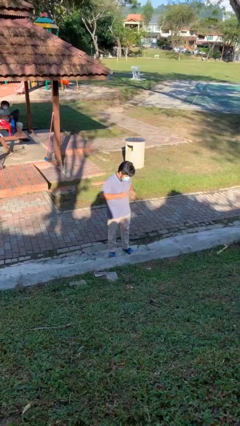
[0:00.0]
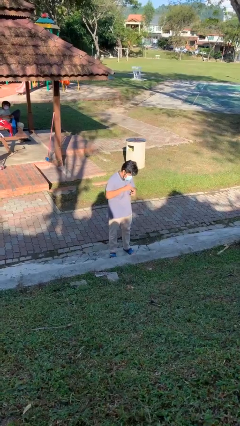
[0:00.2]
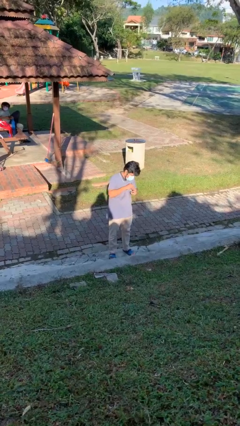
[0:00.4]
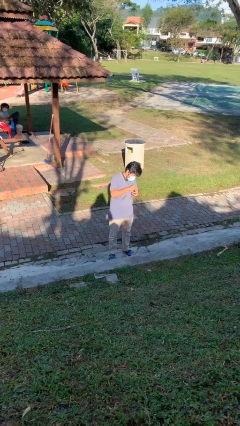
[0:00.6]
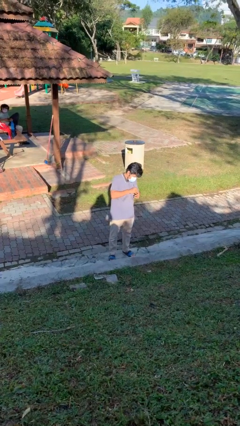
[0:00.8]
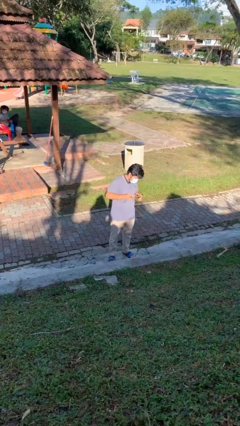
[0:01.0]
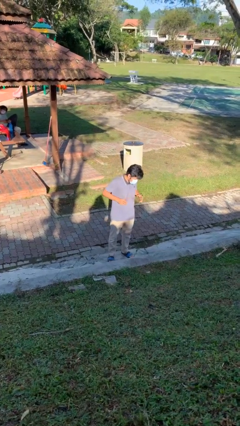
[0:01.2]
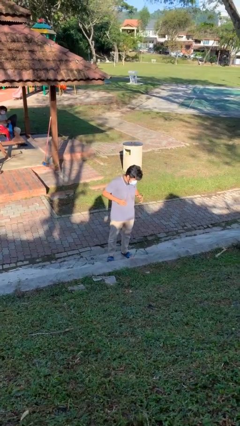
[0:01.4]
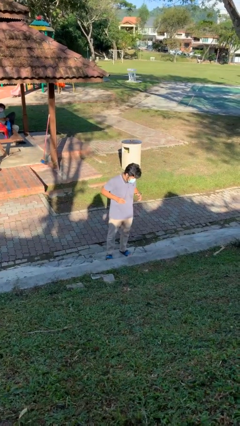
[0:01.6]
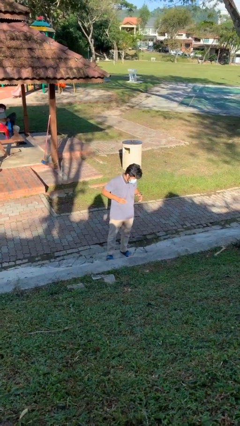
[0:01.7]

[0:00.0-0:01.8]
person puts on ring

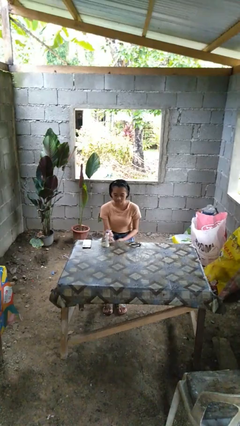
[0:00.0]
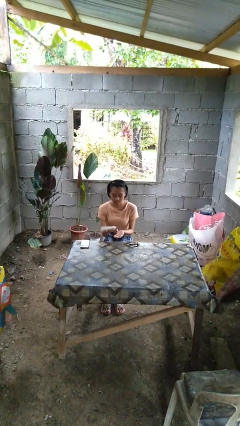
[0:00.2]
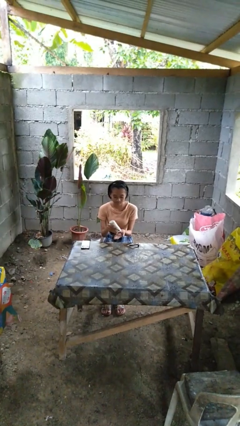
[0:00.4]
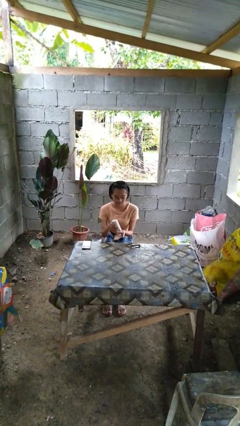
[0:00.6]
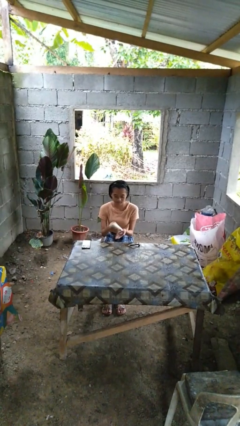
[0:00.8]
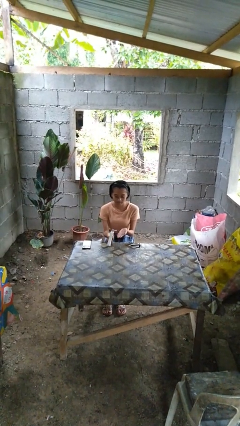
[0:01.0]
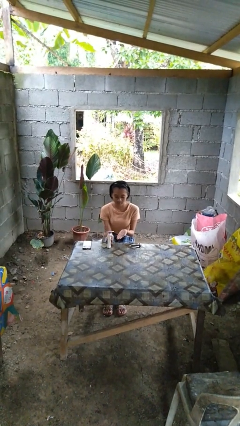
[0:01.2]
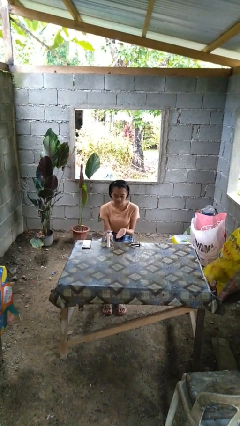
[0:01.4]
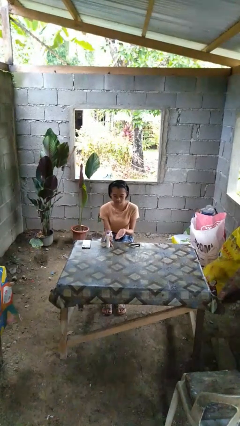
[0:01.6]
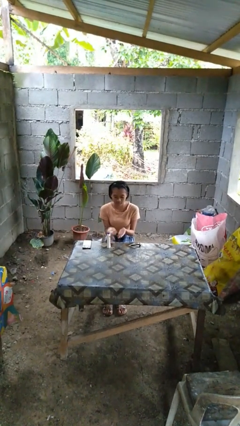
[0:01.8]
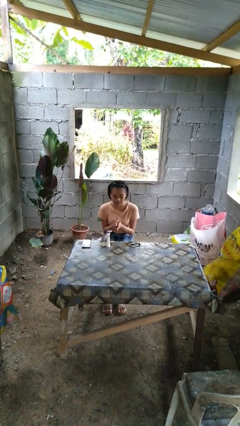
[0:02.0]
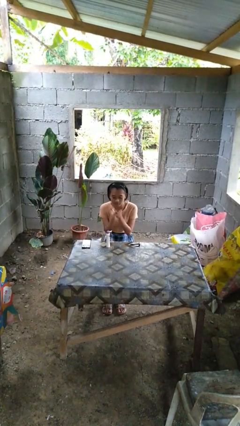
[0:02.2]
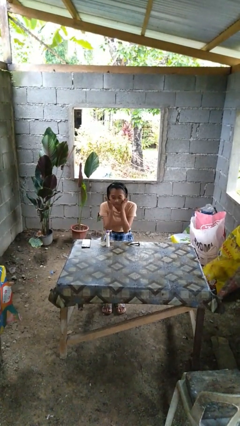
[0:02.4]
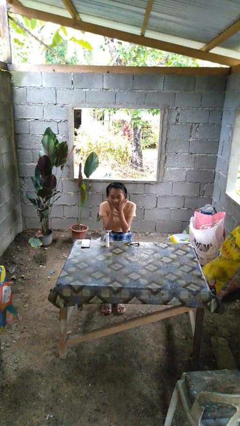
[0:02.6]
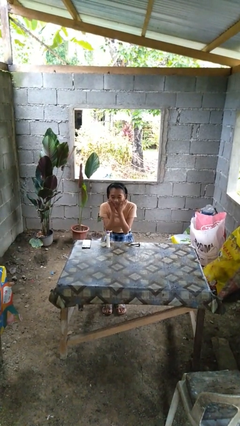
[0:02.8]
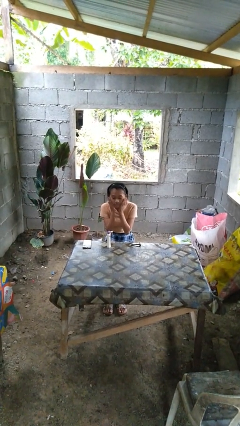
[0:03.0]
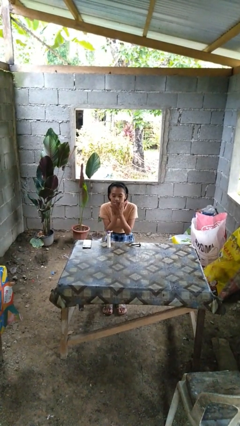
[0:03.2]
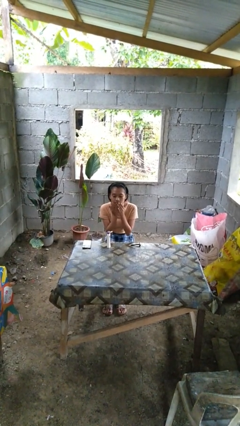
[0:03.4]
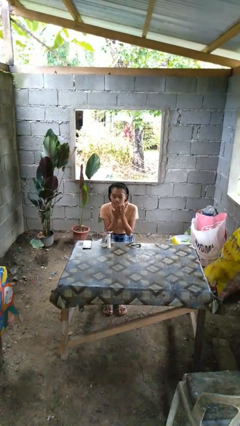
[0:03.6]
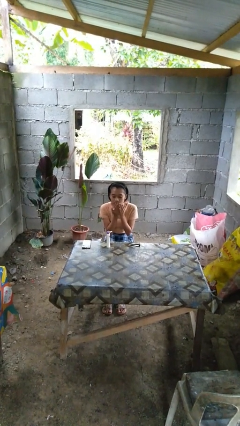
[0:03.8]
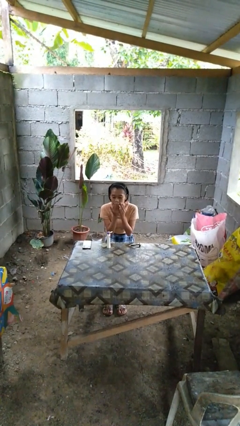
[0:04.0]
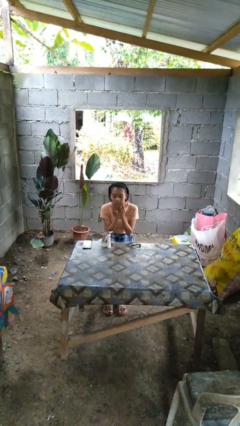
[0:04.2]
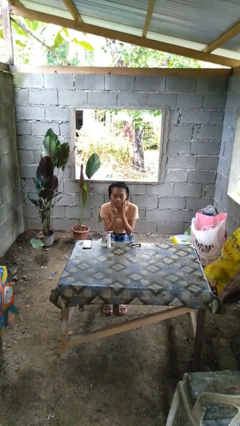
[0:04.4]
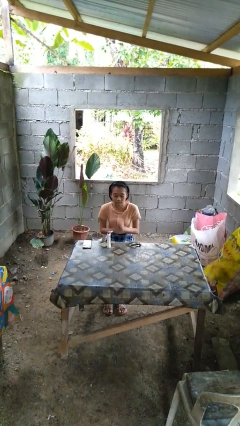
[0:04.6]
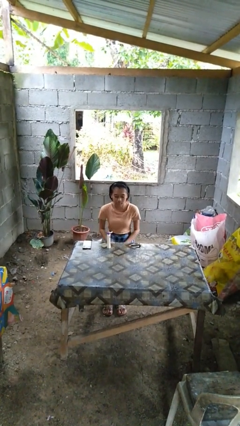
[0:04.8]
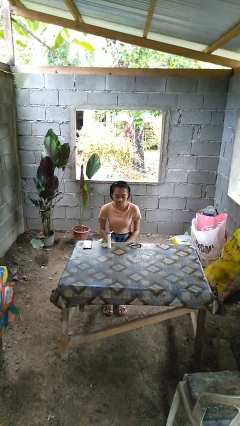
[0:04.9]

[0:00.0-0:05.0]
person applies shaving cream

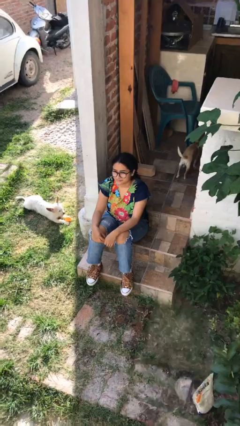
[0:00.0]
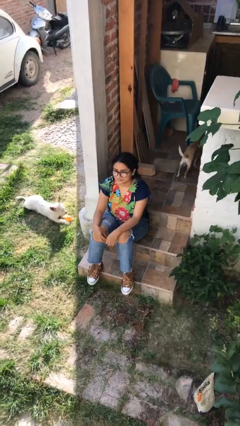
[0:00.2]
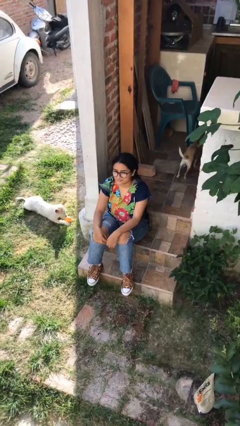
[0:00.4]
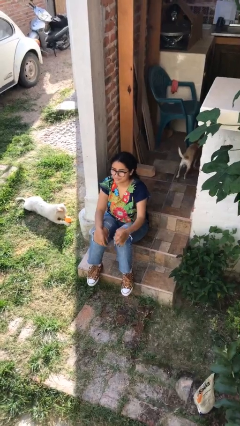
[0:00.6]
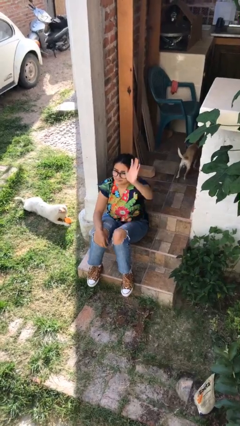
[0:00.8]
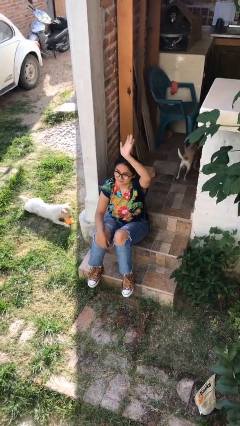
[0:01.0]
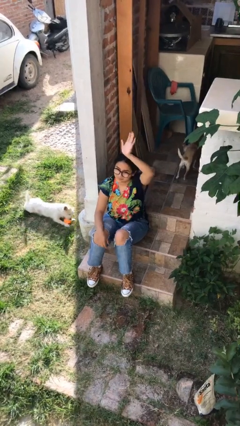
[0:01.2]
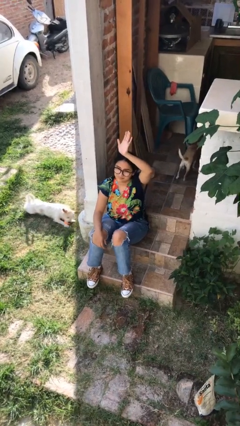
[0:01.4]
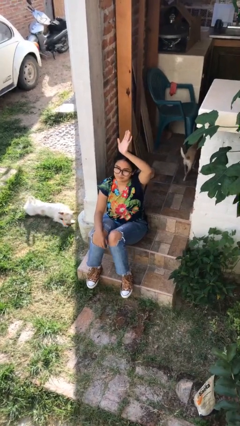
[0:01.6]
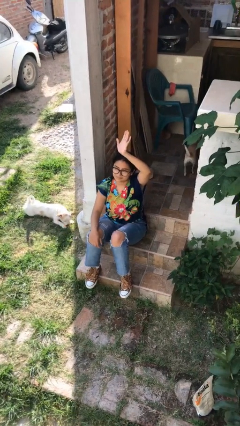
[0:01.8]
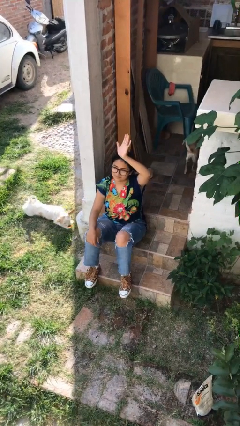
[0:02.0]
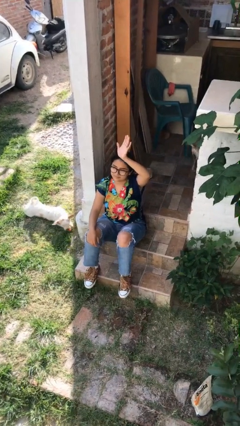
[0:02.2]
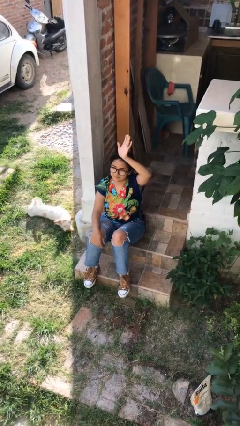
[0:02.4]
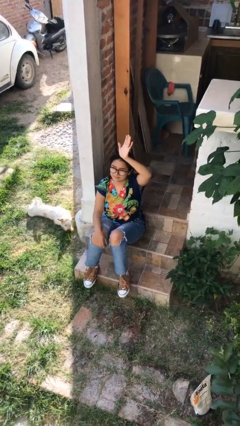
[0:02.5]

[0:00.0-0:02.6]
person gestures raise hand

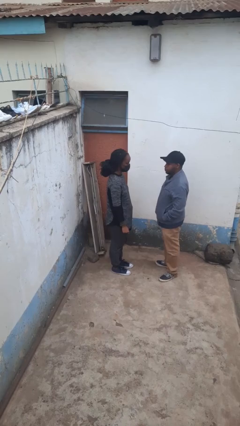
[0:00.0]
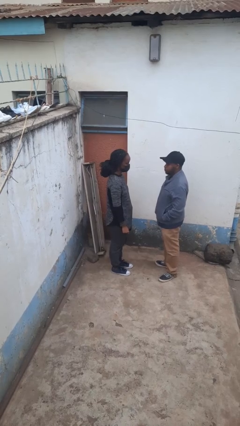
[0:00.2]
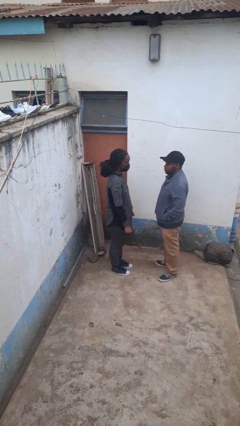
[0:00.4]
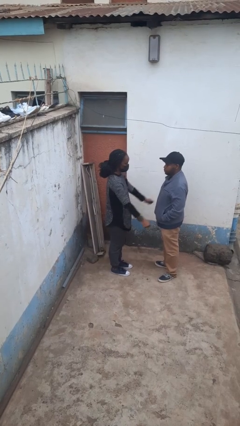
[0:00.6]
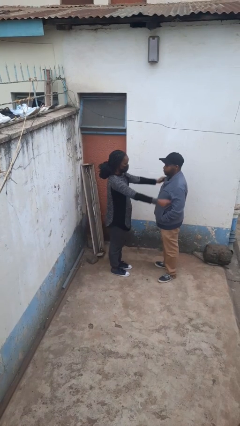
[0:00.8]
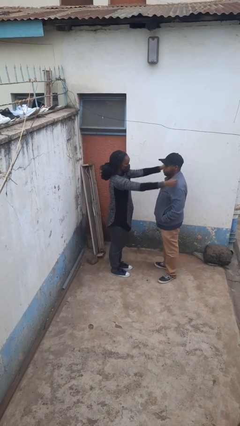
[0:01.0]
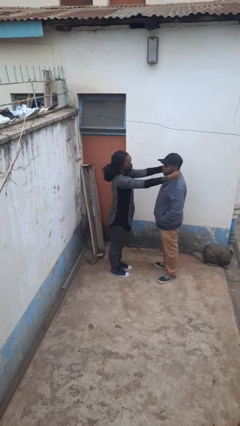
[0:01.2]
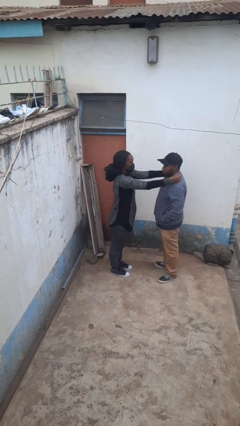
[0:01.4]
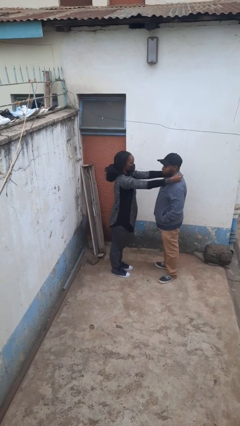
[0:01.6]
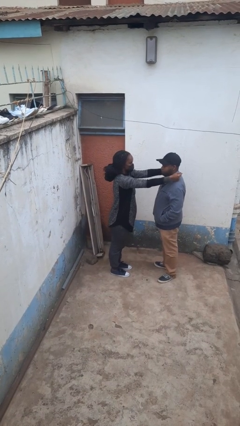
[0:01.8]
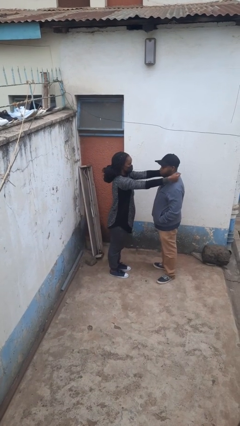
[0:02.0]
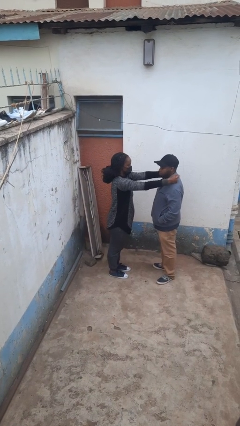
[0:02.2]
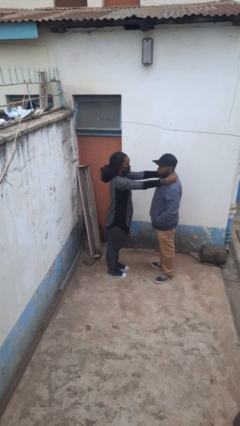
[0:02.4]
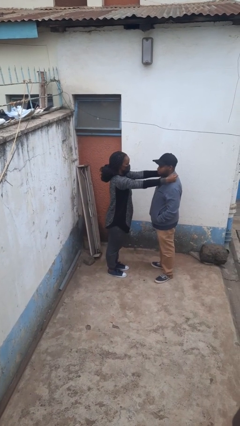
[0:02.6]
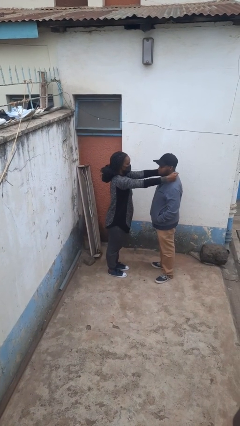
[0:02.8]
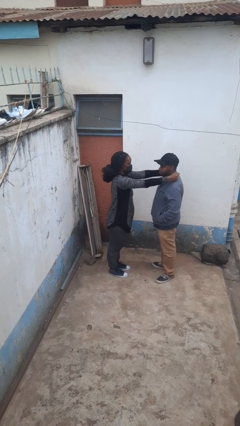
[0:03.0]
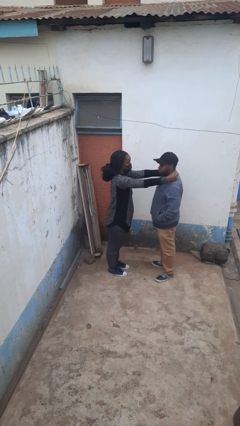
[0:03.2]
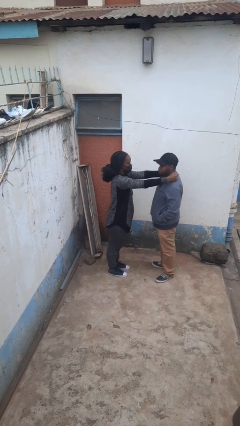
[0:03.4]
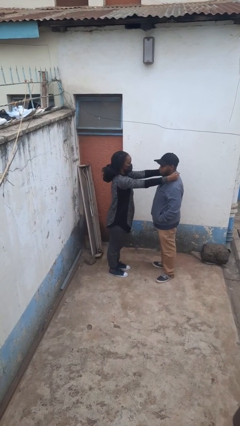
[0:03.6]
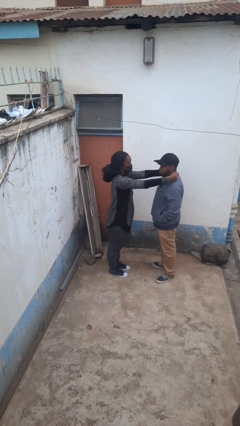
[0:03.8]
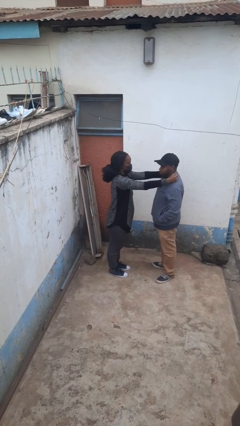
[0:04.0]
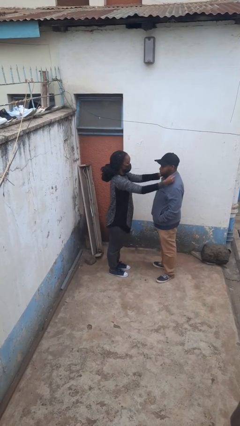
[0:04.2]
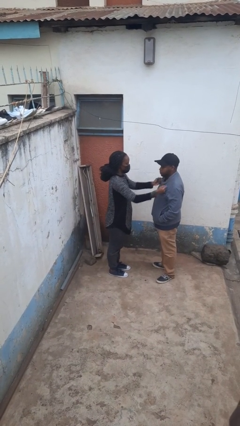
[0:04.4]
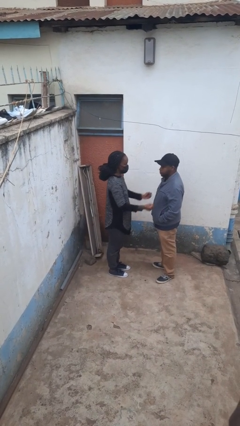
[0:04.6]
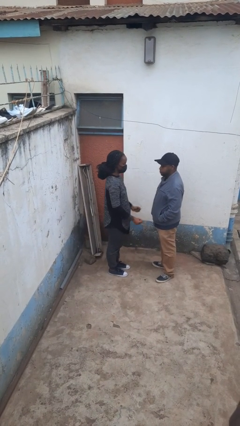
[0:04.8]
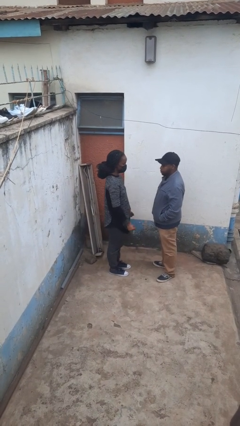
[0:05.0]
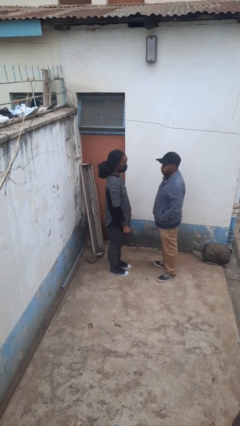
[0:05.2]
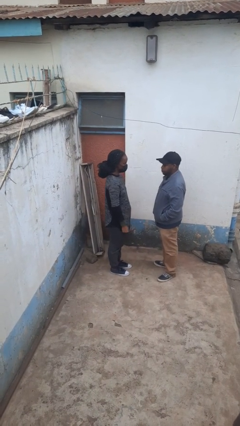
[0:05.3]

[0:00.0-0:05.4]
person pounds shoulders of person

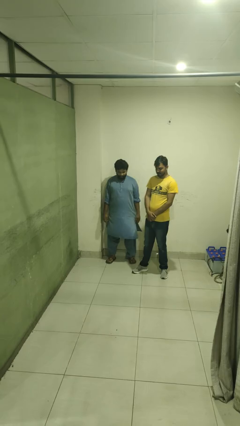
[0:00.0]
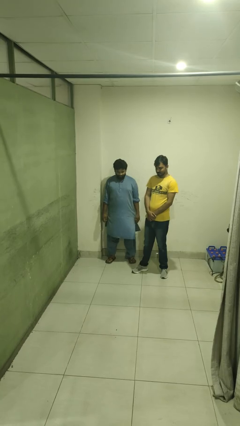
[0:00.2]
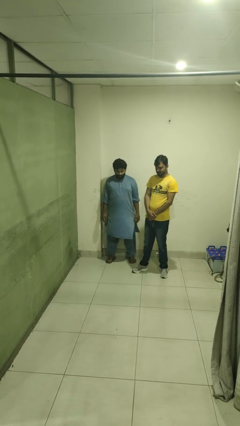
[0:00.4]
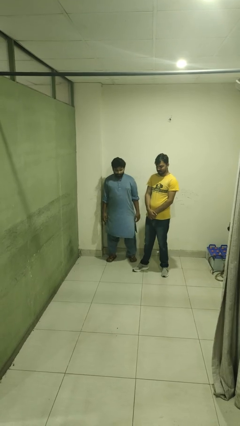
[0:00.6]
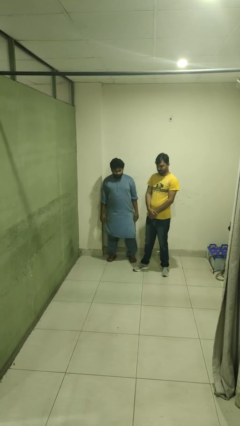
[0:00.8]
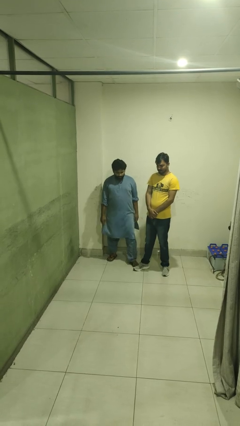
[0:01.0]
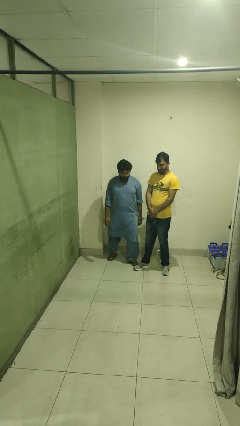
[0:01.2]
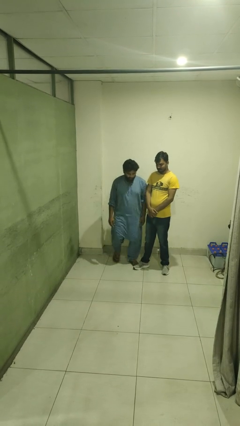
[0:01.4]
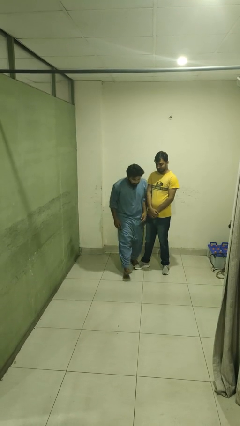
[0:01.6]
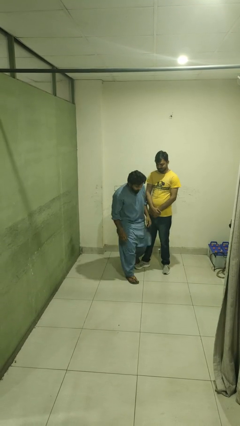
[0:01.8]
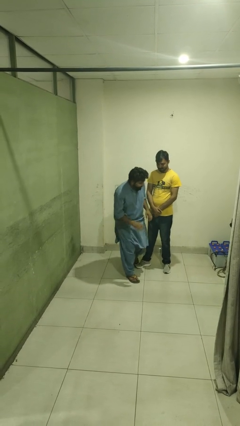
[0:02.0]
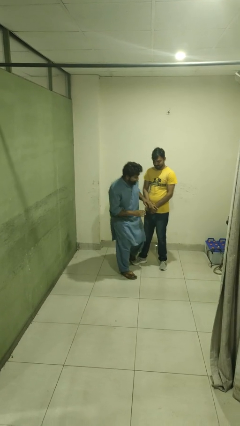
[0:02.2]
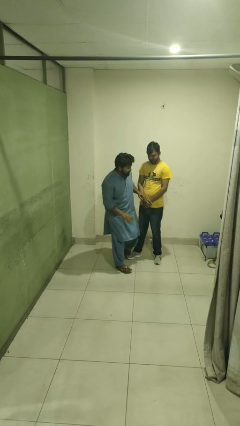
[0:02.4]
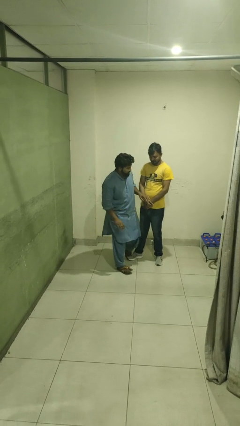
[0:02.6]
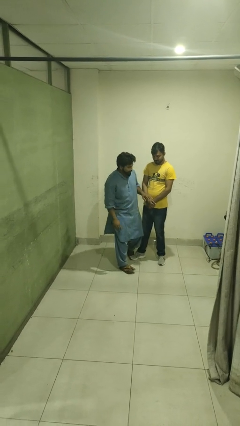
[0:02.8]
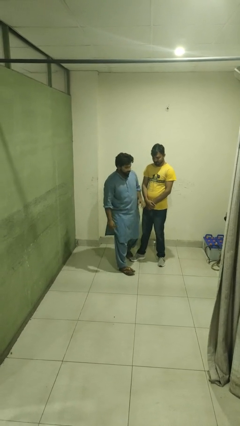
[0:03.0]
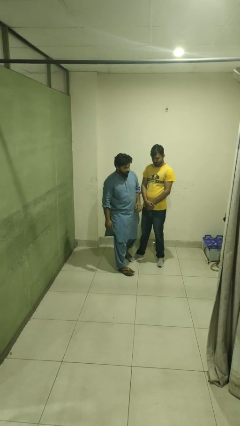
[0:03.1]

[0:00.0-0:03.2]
person bumps into person
